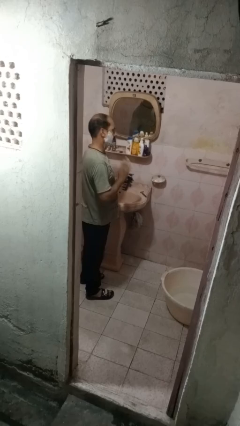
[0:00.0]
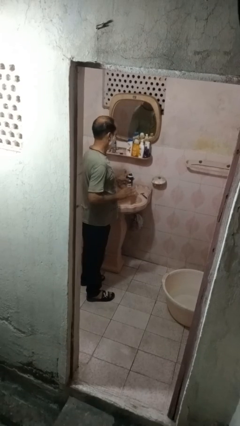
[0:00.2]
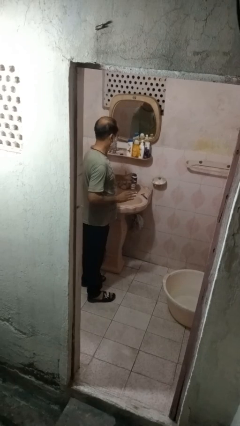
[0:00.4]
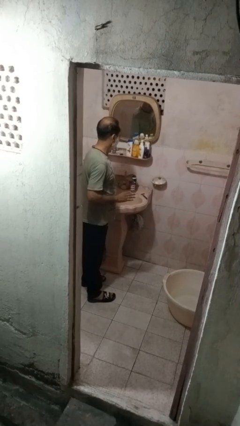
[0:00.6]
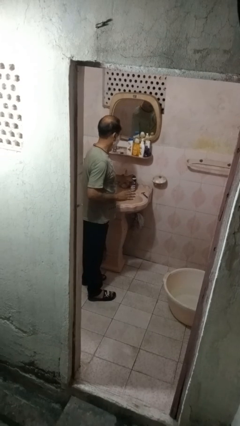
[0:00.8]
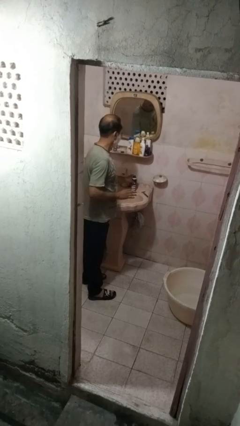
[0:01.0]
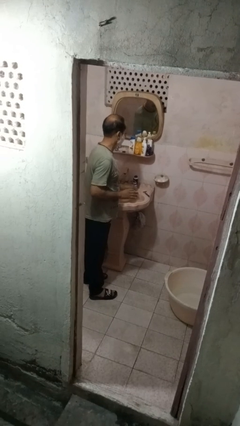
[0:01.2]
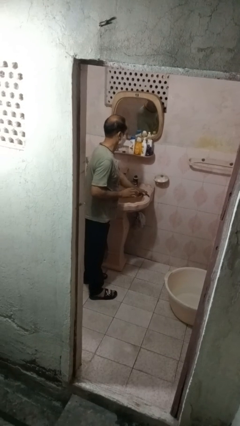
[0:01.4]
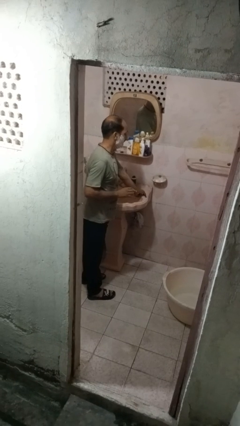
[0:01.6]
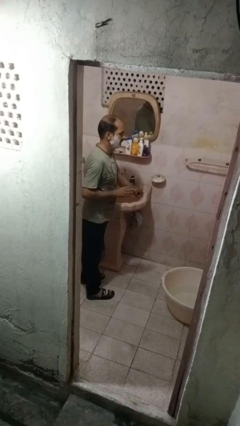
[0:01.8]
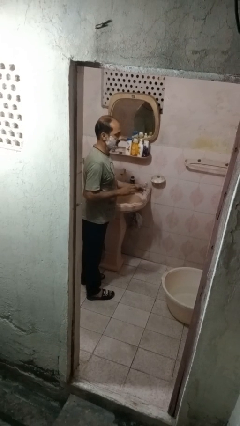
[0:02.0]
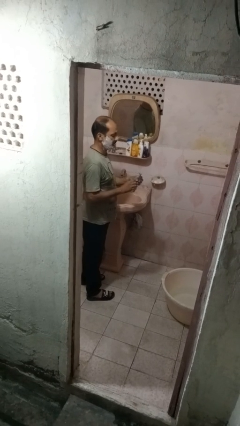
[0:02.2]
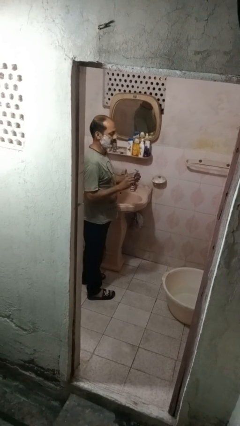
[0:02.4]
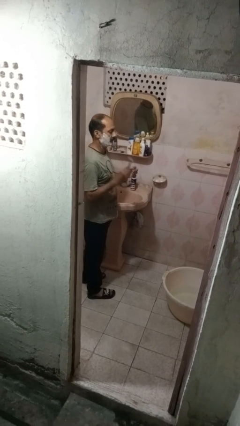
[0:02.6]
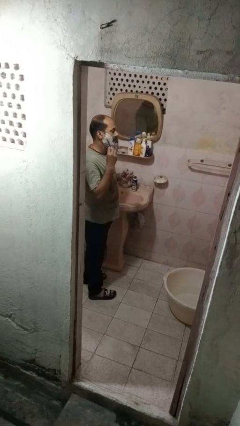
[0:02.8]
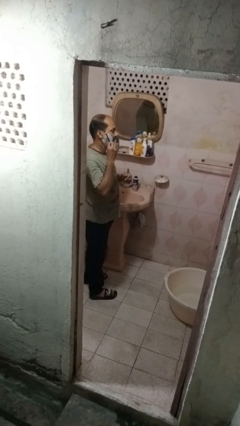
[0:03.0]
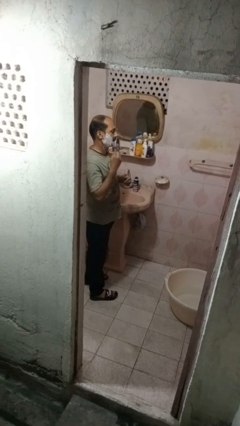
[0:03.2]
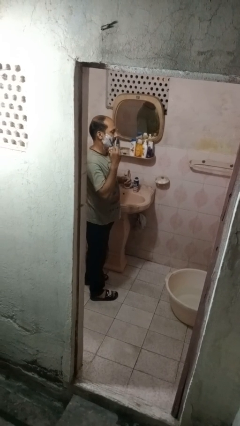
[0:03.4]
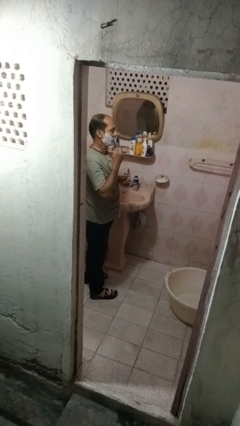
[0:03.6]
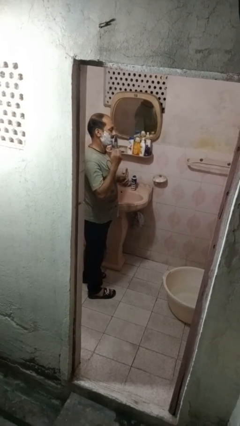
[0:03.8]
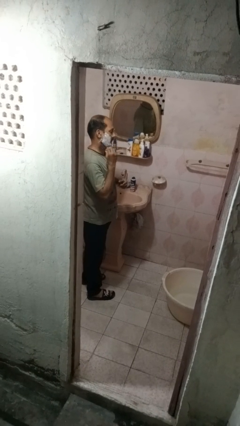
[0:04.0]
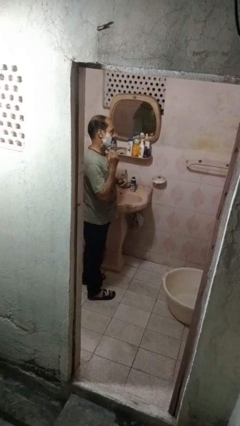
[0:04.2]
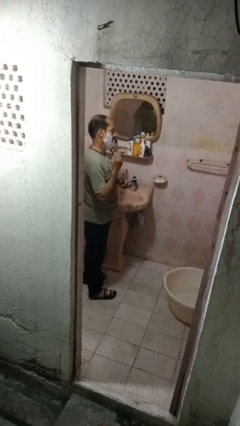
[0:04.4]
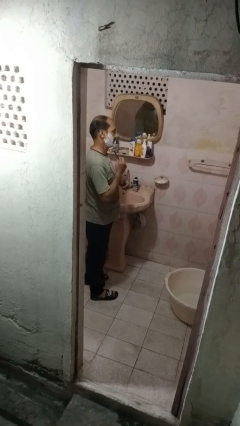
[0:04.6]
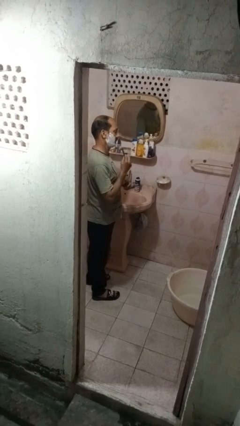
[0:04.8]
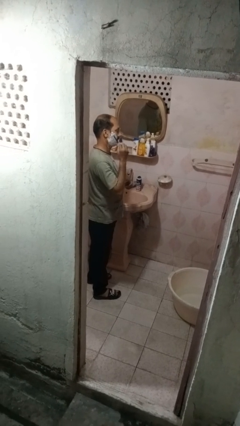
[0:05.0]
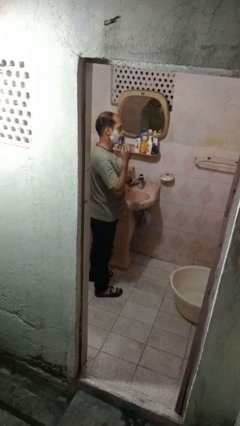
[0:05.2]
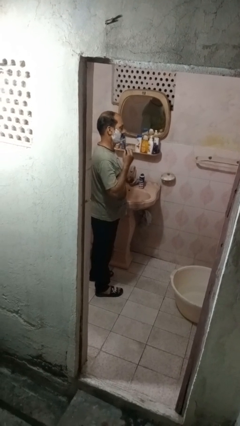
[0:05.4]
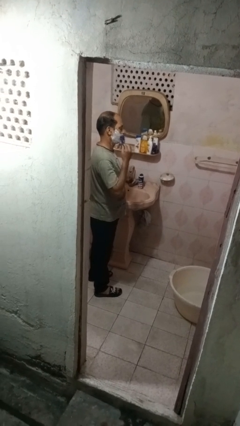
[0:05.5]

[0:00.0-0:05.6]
person shaves face

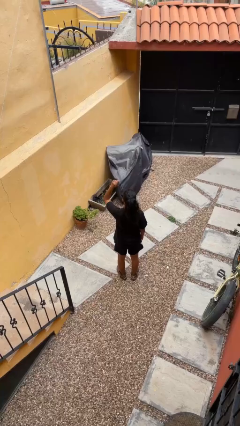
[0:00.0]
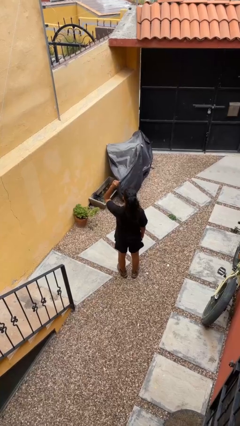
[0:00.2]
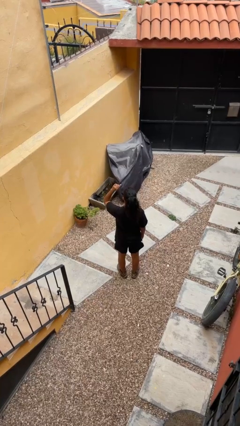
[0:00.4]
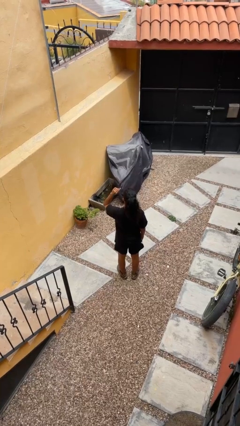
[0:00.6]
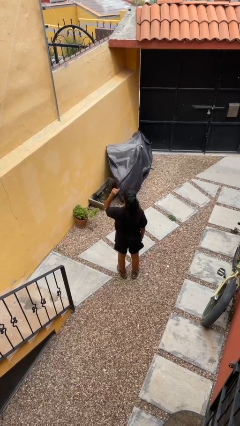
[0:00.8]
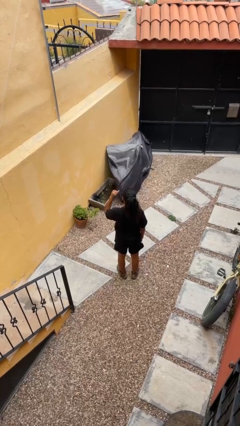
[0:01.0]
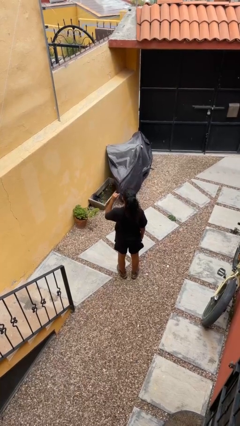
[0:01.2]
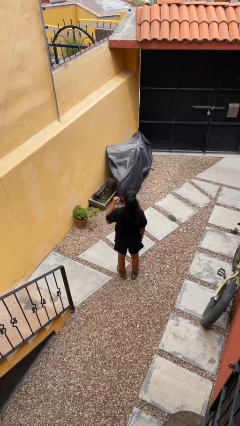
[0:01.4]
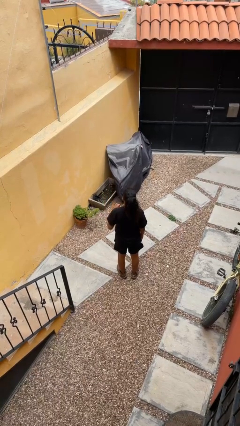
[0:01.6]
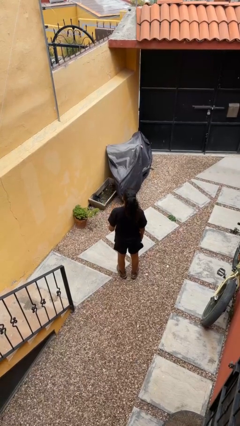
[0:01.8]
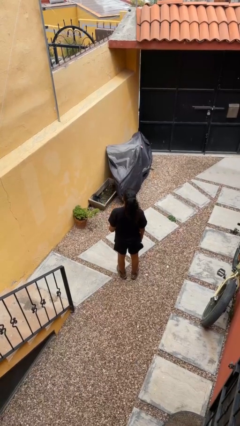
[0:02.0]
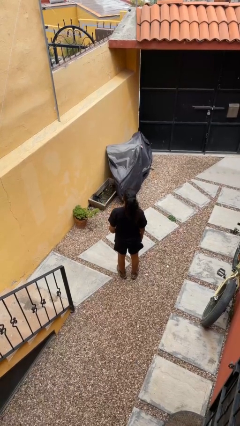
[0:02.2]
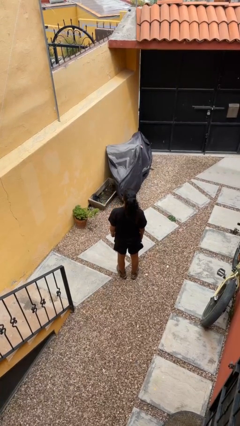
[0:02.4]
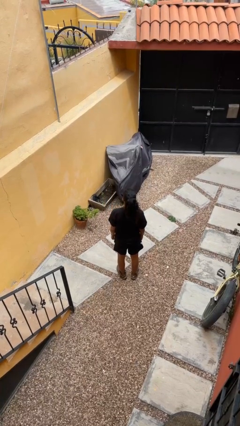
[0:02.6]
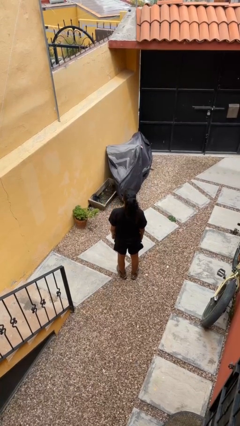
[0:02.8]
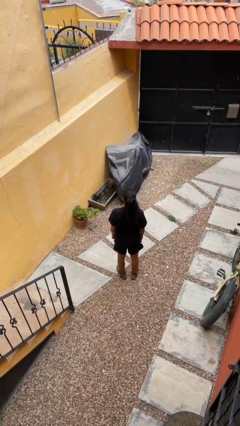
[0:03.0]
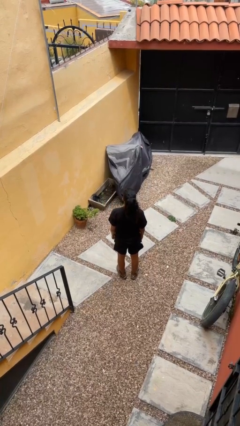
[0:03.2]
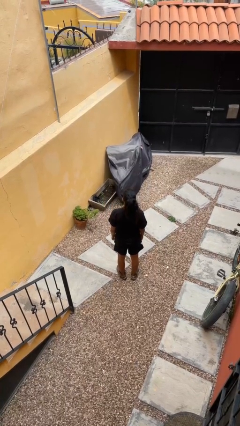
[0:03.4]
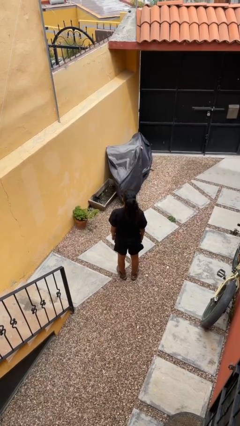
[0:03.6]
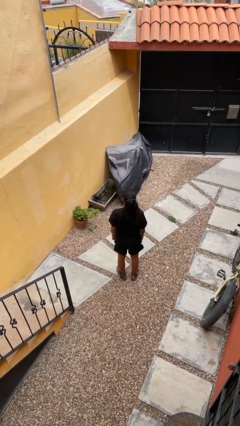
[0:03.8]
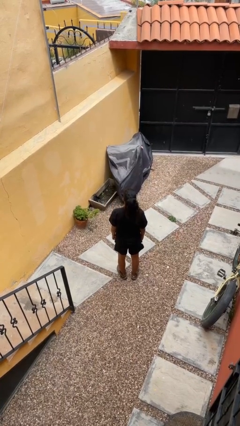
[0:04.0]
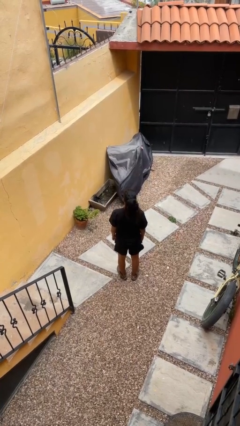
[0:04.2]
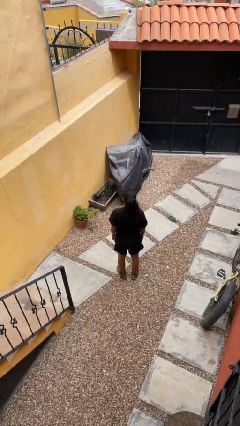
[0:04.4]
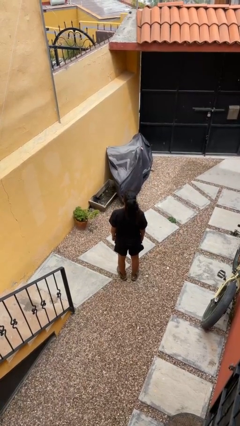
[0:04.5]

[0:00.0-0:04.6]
person gestures lower hand

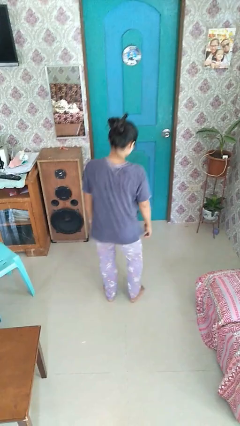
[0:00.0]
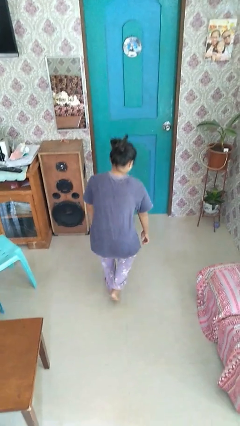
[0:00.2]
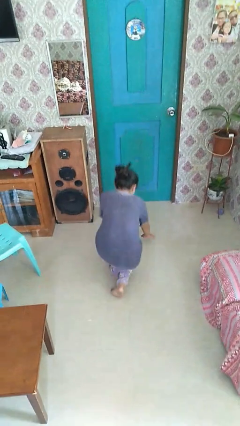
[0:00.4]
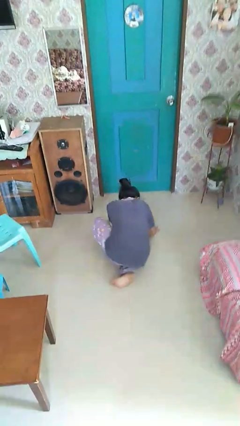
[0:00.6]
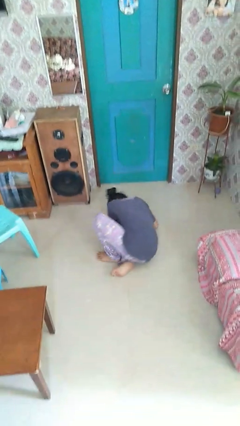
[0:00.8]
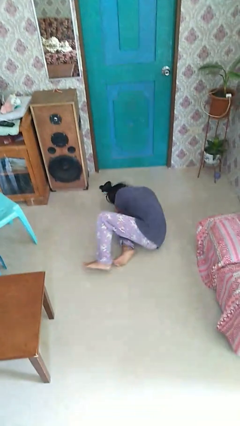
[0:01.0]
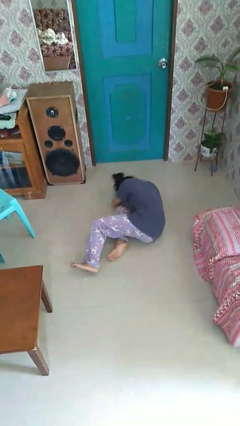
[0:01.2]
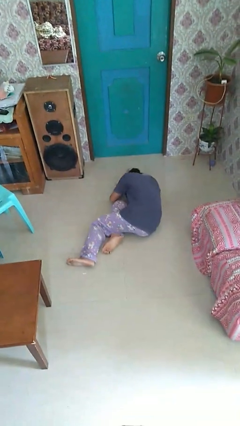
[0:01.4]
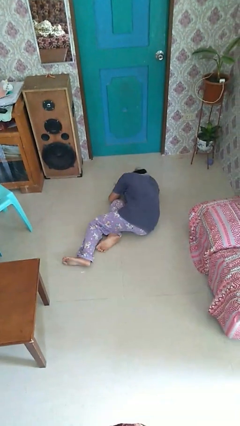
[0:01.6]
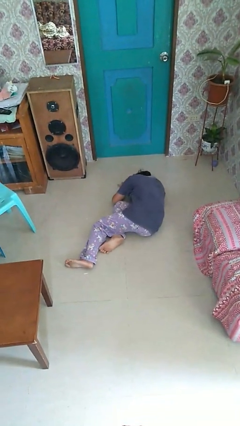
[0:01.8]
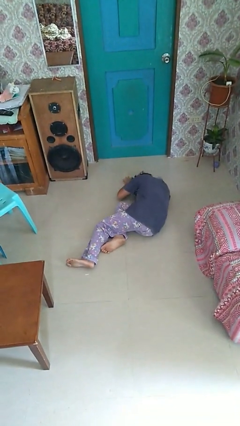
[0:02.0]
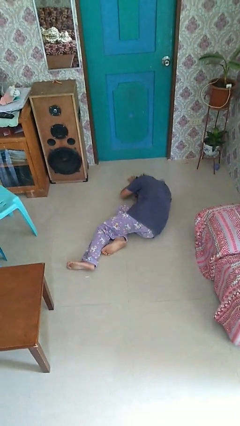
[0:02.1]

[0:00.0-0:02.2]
person falls while standing

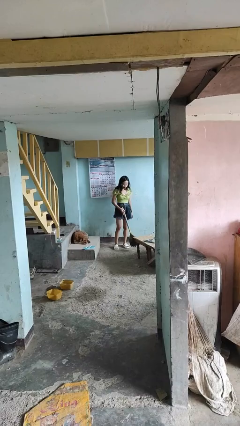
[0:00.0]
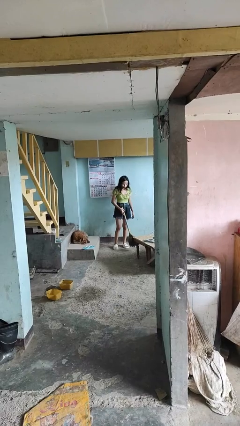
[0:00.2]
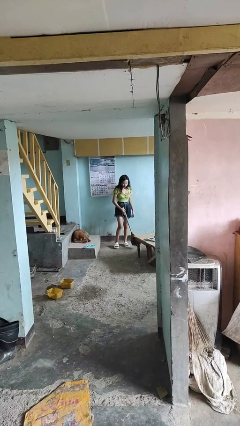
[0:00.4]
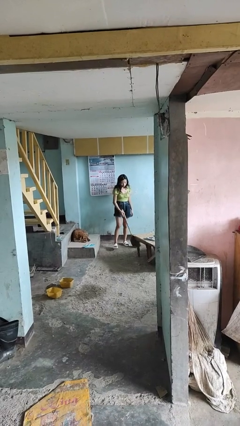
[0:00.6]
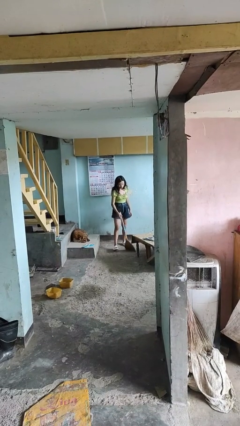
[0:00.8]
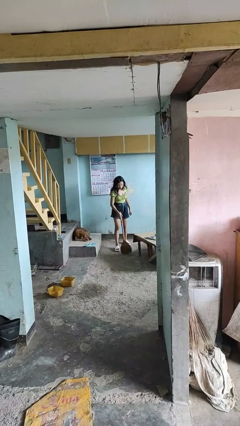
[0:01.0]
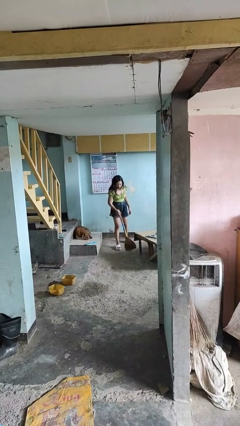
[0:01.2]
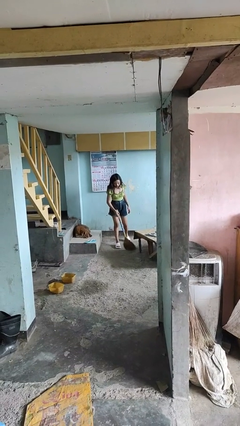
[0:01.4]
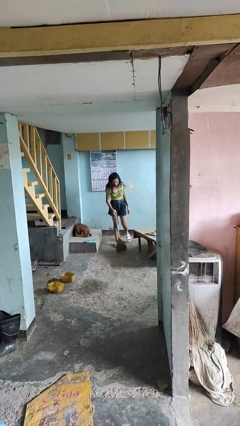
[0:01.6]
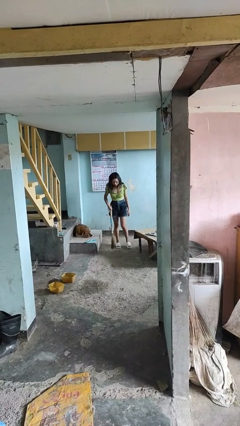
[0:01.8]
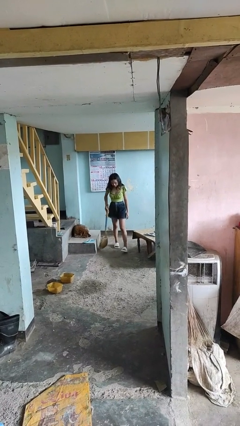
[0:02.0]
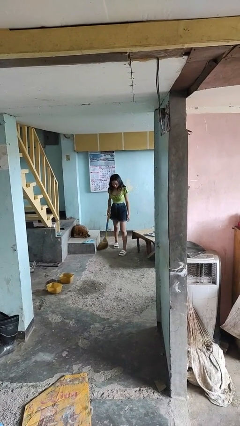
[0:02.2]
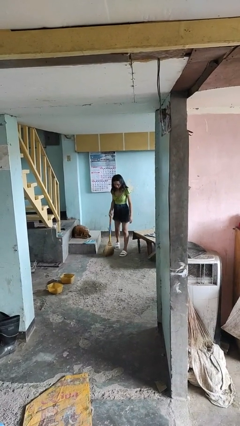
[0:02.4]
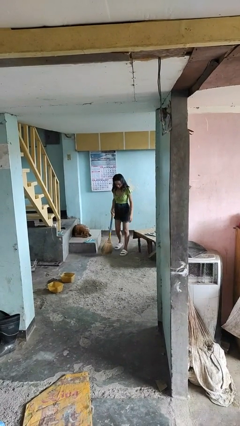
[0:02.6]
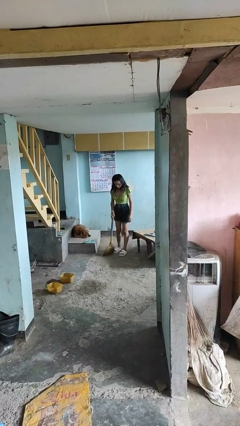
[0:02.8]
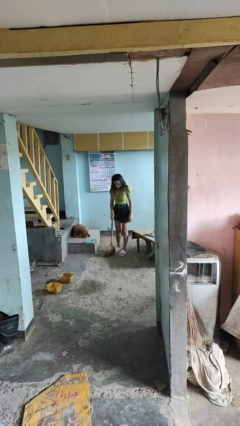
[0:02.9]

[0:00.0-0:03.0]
person sweeps floor

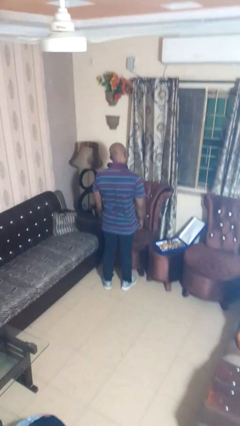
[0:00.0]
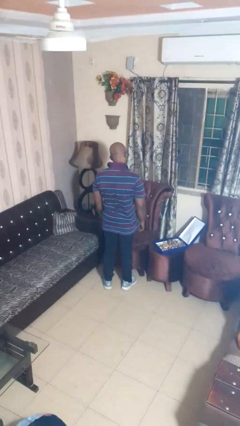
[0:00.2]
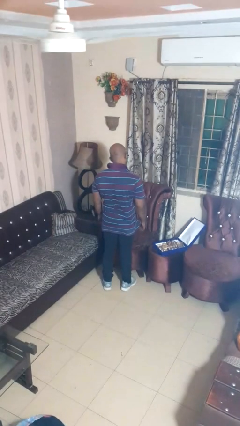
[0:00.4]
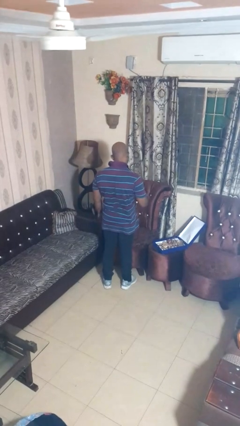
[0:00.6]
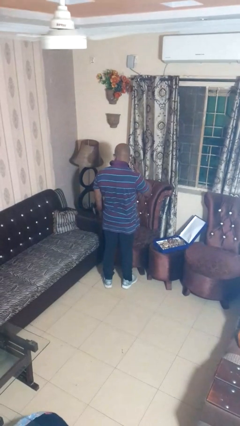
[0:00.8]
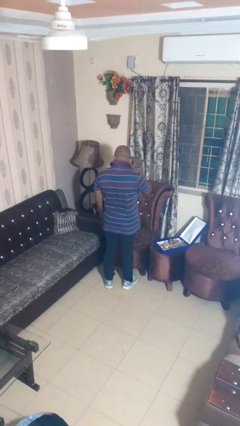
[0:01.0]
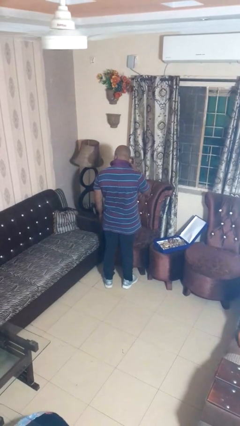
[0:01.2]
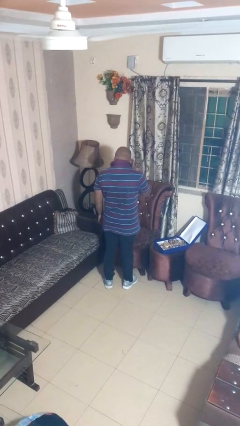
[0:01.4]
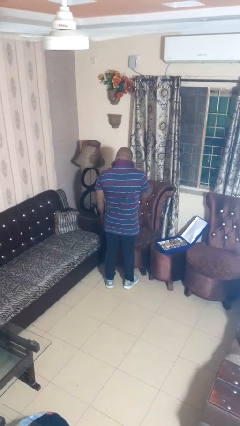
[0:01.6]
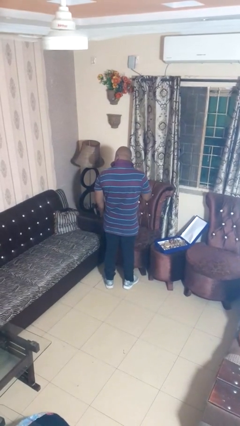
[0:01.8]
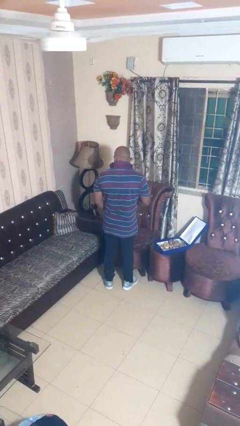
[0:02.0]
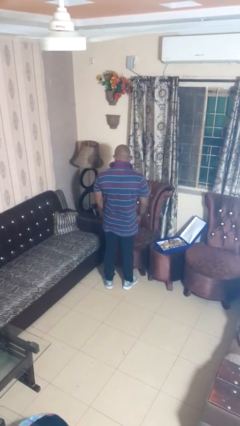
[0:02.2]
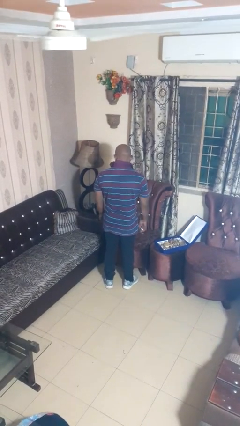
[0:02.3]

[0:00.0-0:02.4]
person takes off earrings
